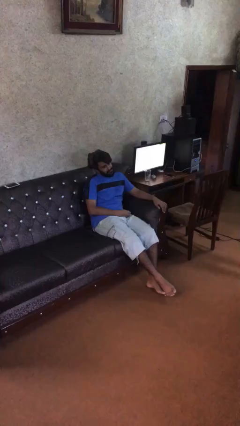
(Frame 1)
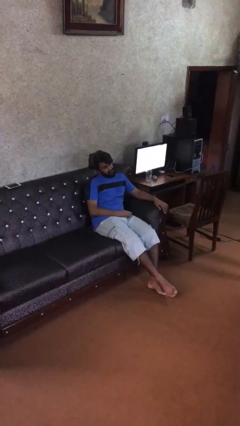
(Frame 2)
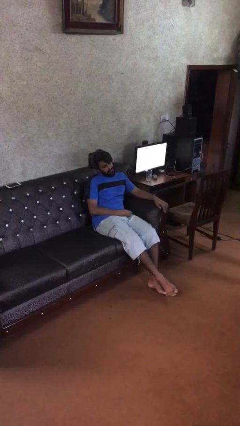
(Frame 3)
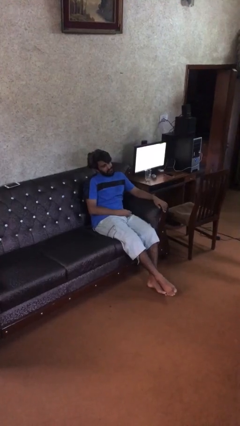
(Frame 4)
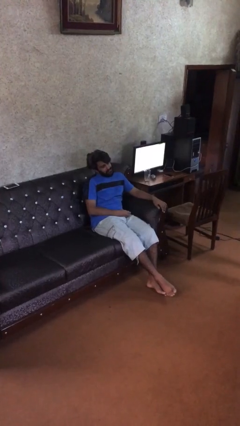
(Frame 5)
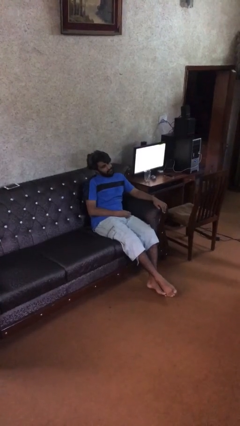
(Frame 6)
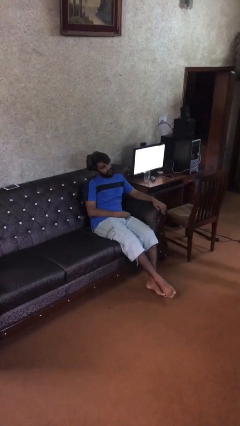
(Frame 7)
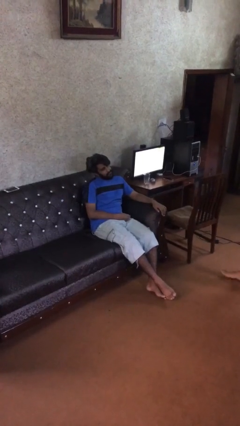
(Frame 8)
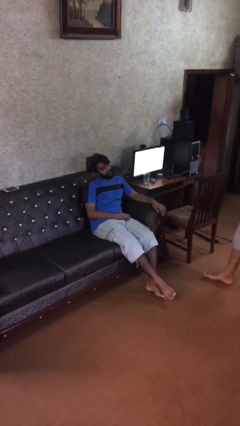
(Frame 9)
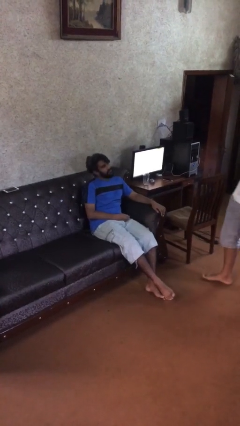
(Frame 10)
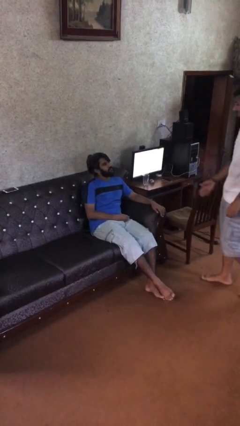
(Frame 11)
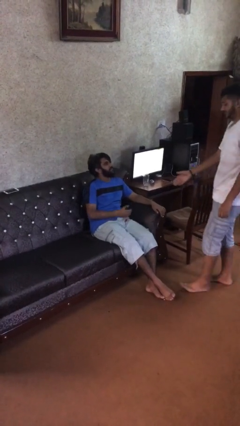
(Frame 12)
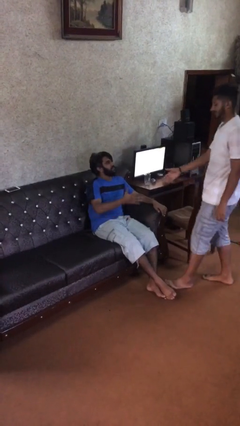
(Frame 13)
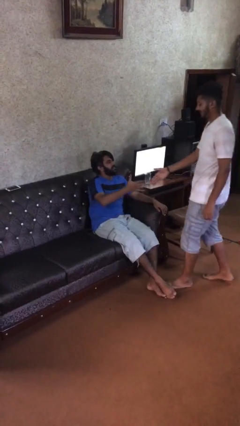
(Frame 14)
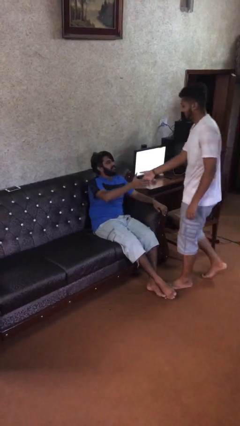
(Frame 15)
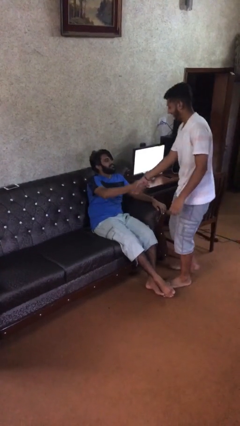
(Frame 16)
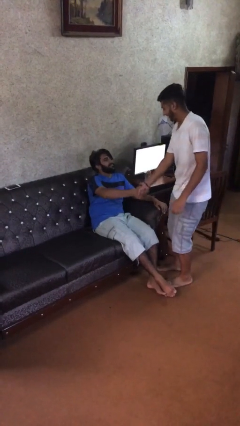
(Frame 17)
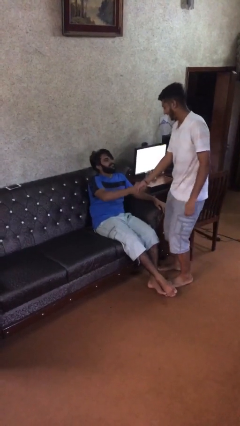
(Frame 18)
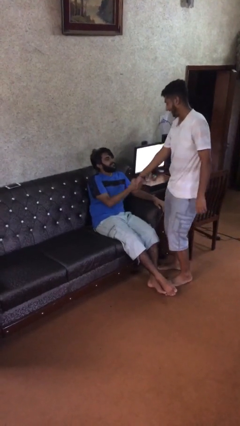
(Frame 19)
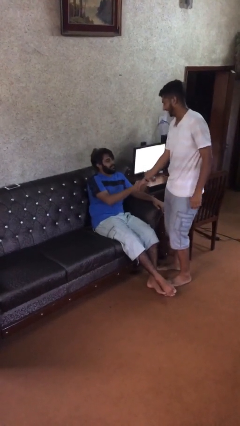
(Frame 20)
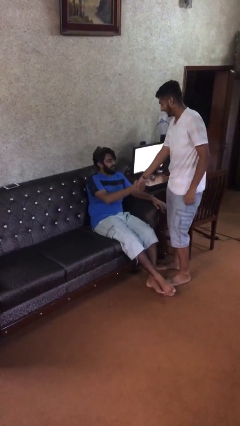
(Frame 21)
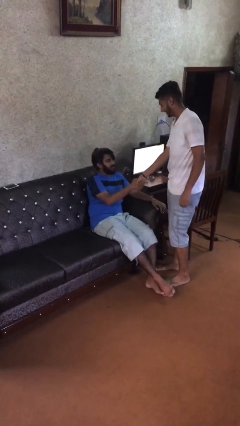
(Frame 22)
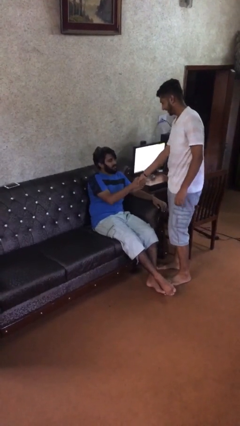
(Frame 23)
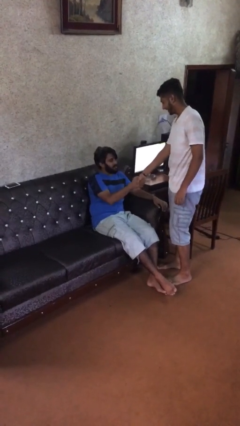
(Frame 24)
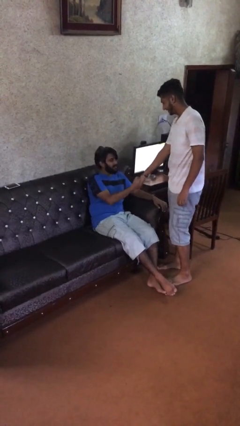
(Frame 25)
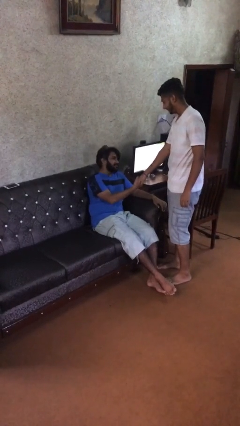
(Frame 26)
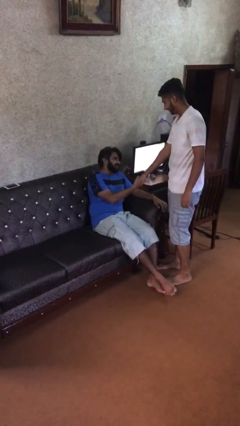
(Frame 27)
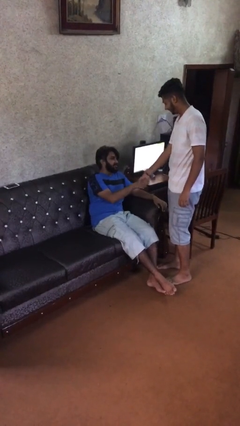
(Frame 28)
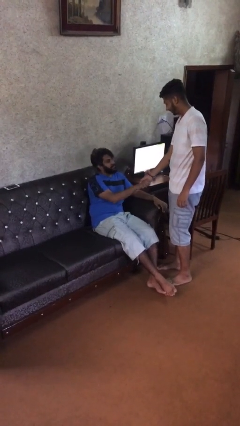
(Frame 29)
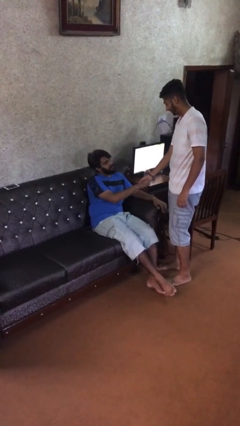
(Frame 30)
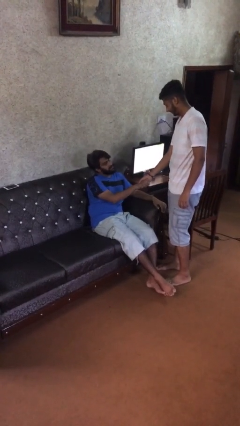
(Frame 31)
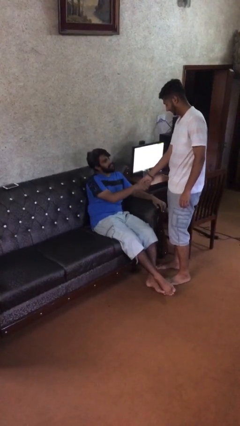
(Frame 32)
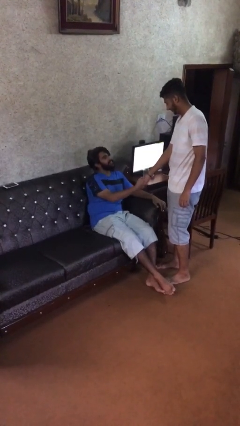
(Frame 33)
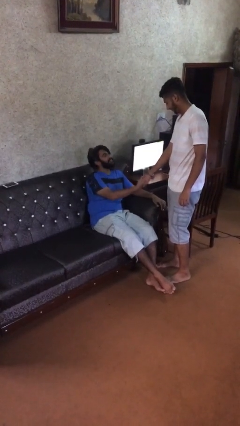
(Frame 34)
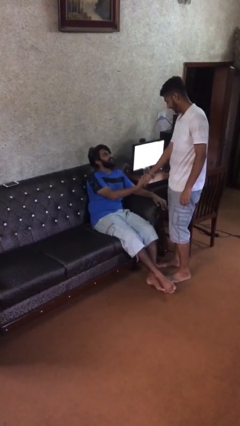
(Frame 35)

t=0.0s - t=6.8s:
person shakes hand

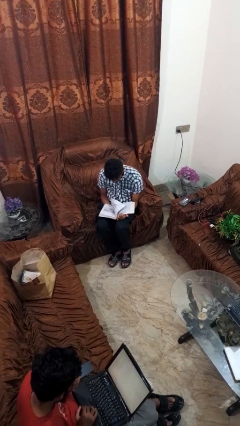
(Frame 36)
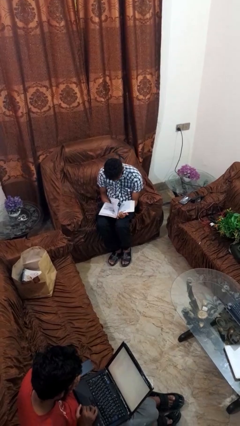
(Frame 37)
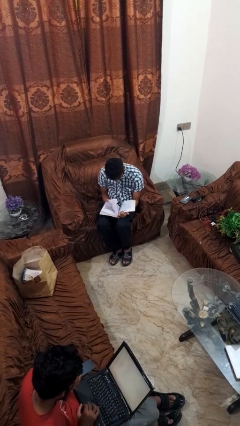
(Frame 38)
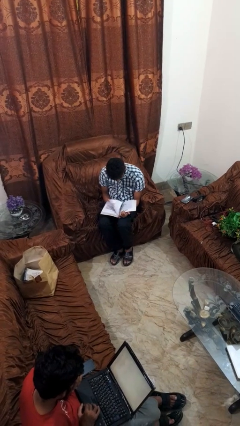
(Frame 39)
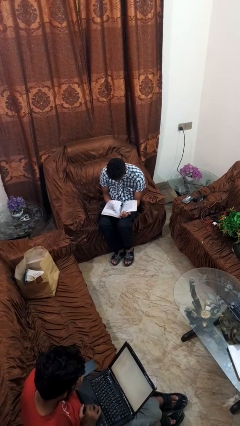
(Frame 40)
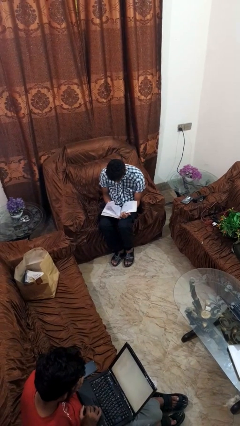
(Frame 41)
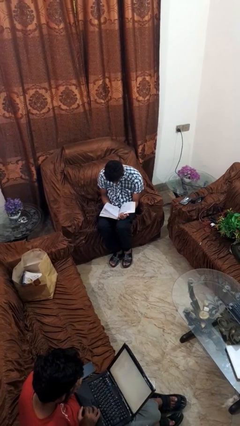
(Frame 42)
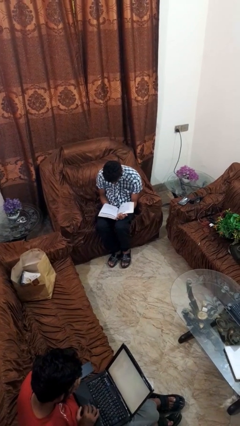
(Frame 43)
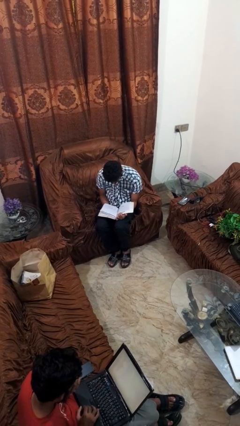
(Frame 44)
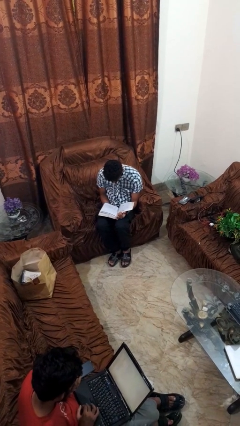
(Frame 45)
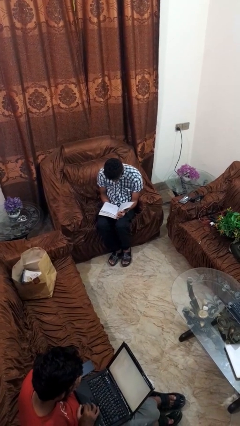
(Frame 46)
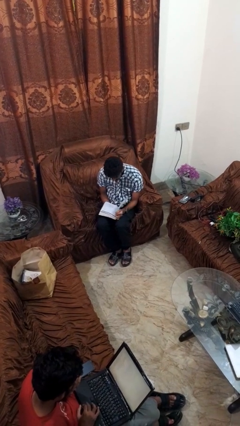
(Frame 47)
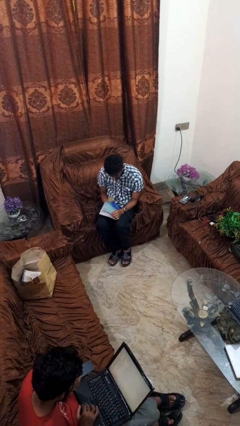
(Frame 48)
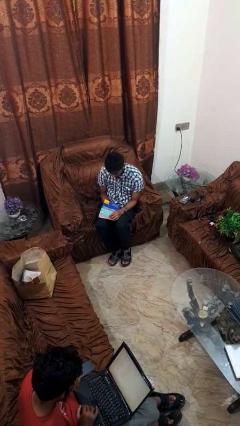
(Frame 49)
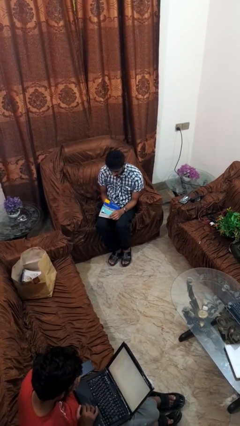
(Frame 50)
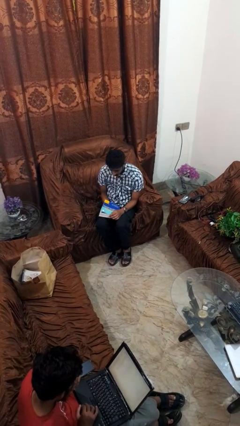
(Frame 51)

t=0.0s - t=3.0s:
person reads book

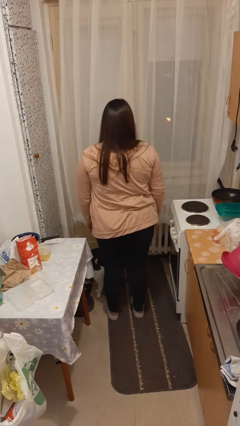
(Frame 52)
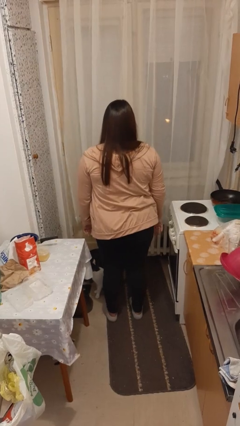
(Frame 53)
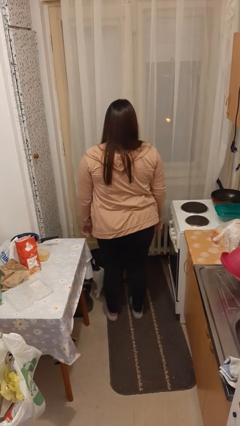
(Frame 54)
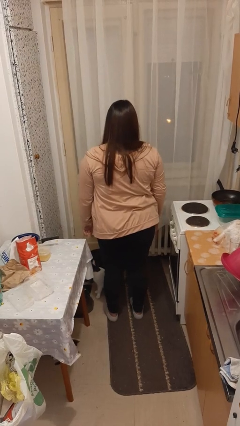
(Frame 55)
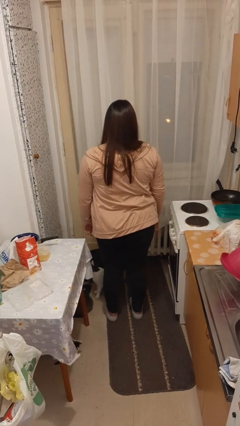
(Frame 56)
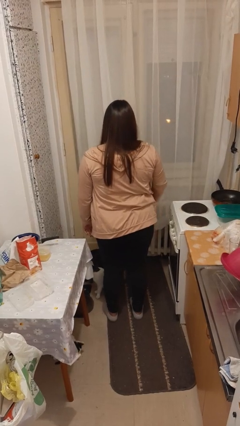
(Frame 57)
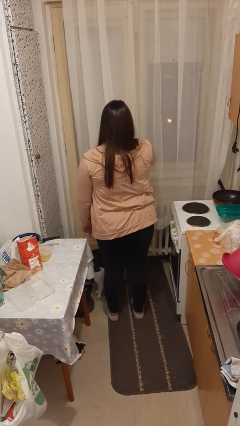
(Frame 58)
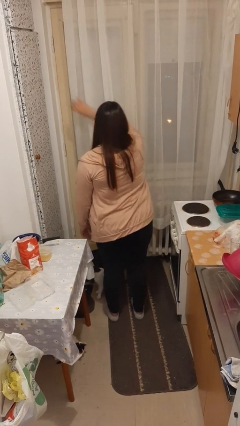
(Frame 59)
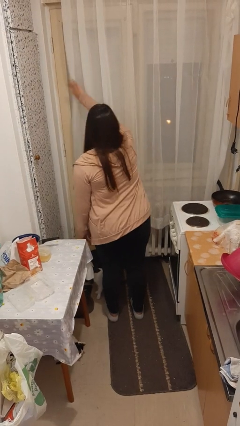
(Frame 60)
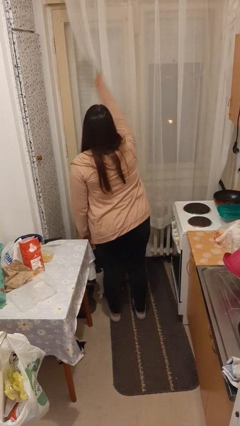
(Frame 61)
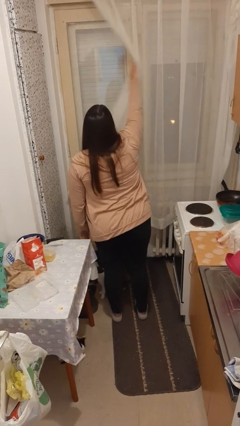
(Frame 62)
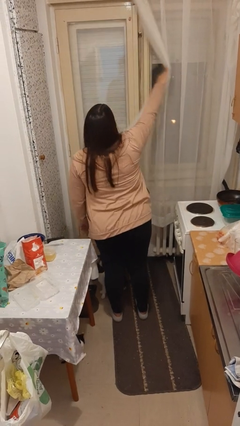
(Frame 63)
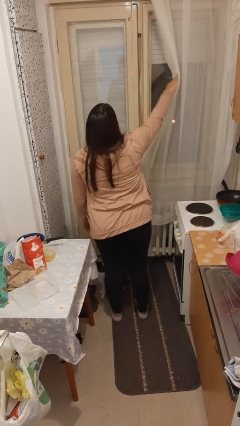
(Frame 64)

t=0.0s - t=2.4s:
person opens curtains

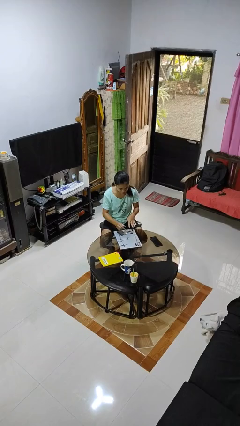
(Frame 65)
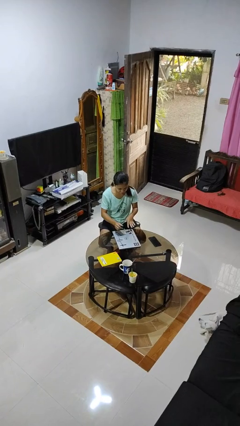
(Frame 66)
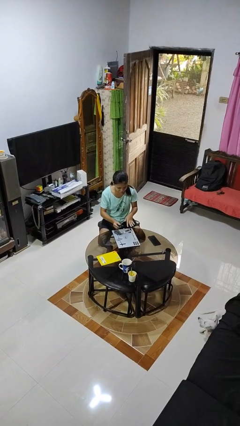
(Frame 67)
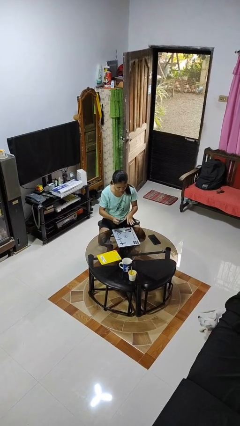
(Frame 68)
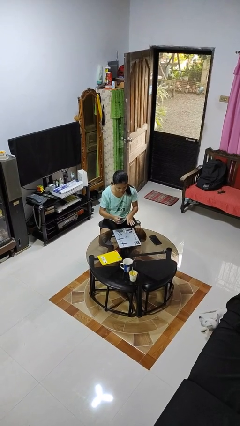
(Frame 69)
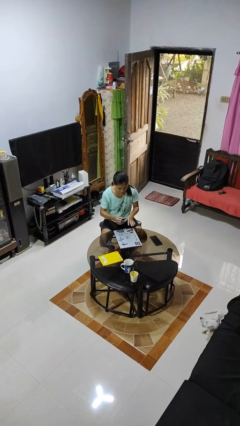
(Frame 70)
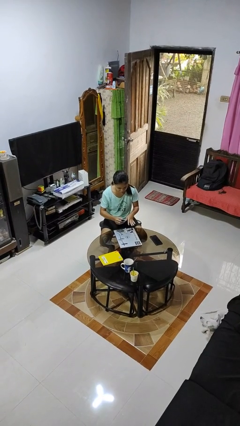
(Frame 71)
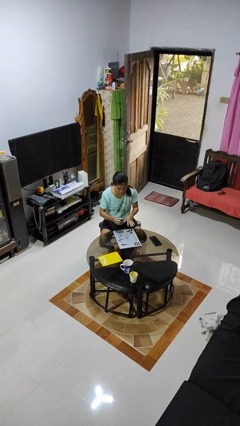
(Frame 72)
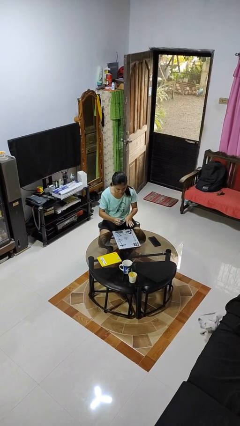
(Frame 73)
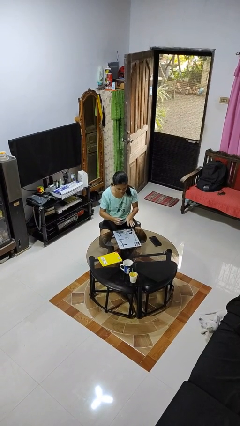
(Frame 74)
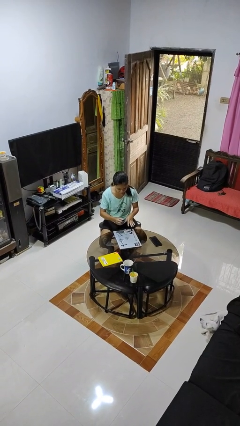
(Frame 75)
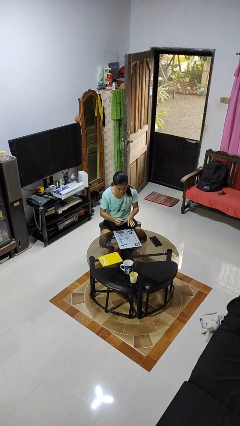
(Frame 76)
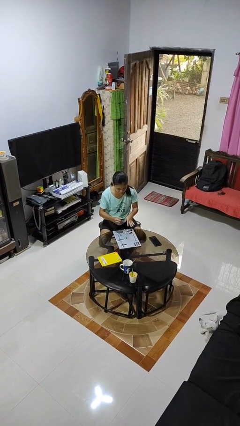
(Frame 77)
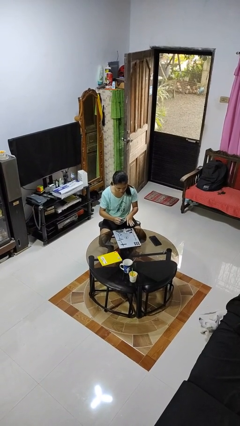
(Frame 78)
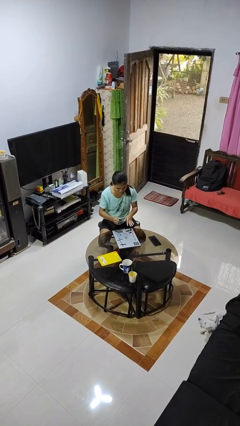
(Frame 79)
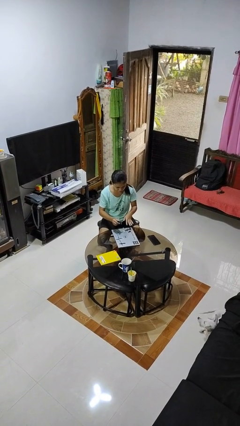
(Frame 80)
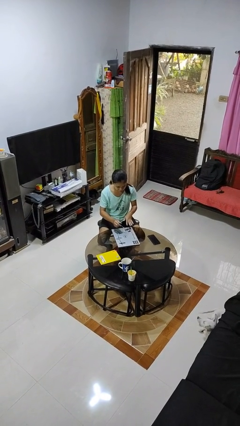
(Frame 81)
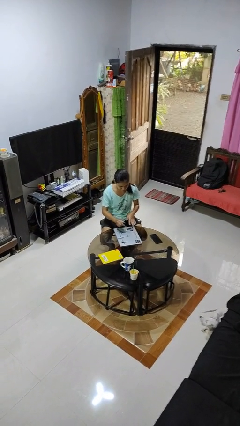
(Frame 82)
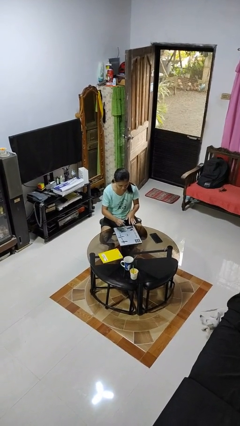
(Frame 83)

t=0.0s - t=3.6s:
person paints fingernails

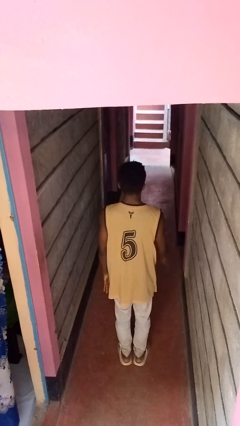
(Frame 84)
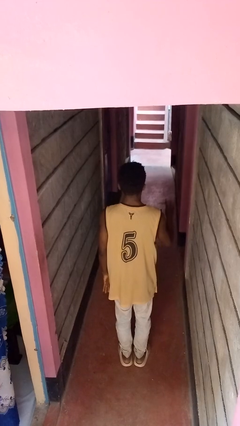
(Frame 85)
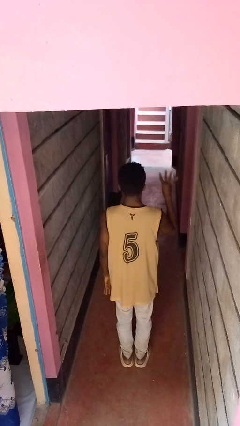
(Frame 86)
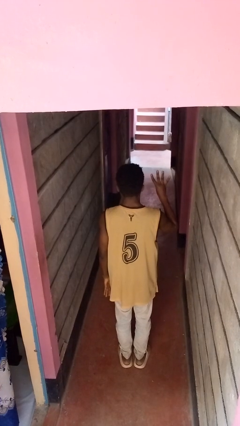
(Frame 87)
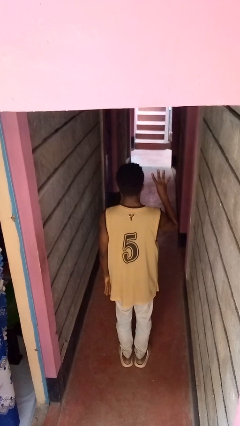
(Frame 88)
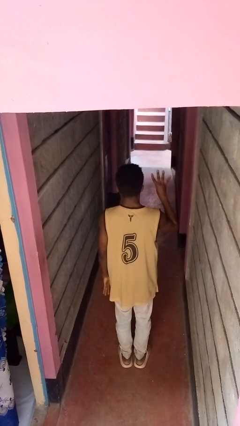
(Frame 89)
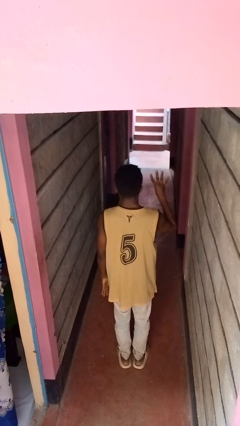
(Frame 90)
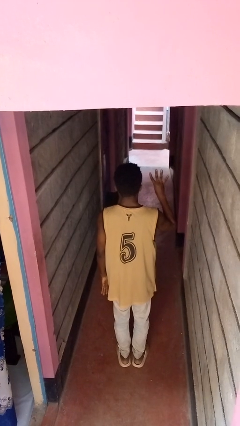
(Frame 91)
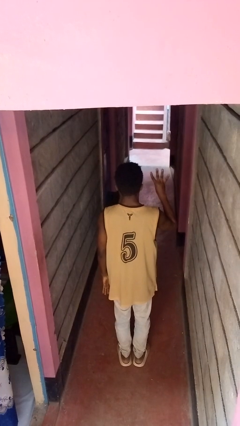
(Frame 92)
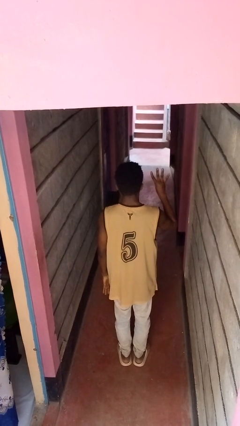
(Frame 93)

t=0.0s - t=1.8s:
person gestures number four
